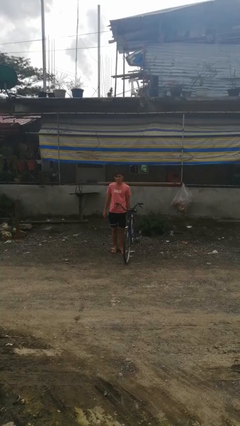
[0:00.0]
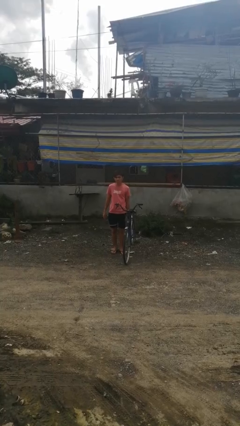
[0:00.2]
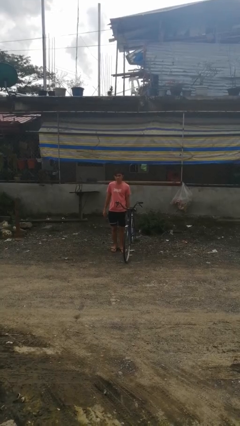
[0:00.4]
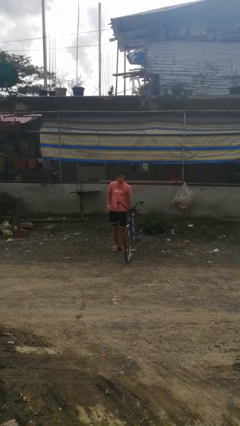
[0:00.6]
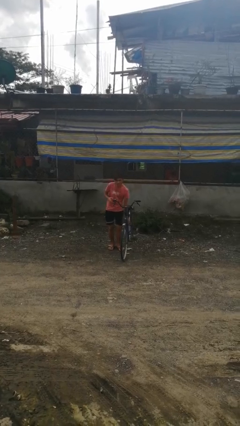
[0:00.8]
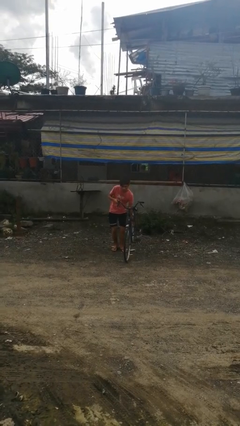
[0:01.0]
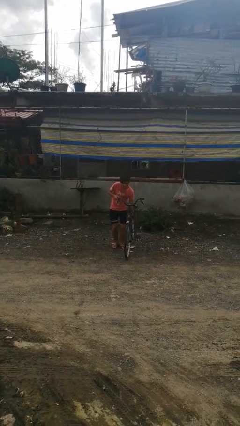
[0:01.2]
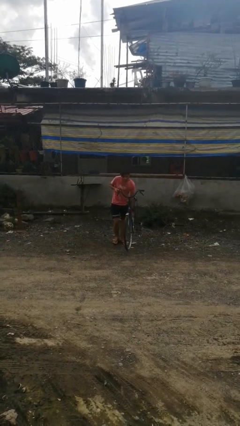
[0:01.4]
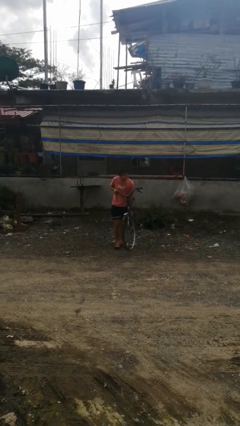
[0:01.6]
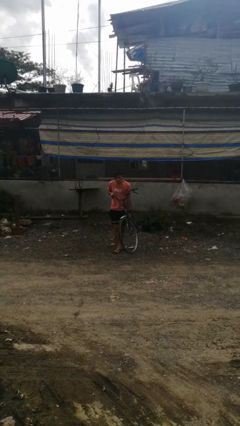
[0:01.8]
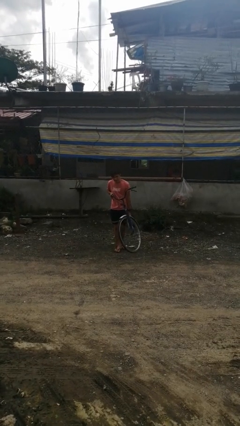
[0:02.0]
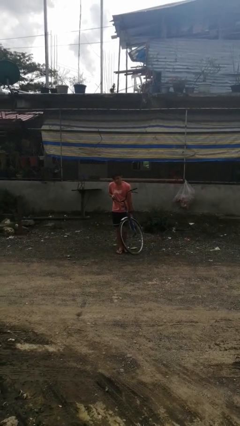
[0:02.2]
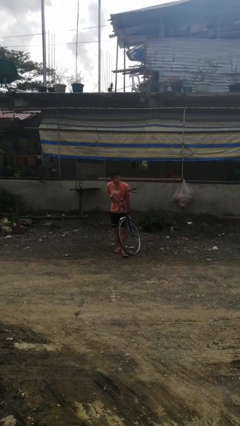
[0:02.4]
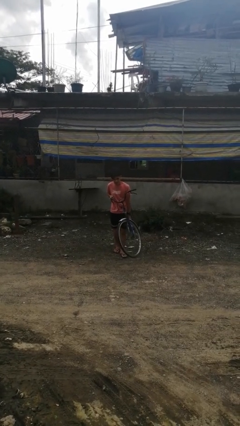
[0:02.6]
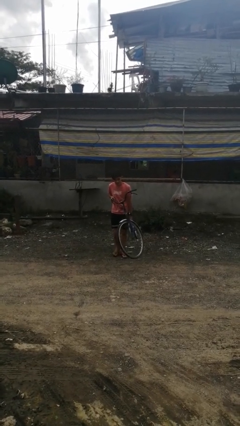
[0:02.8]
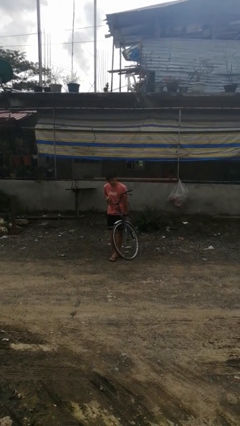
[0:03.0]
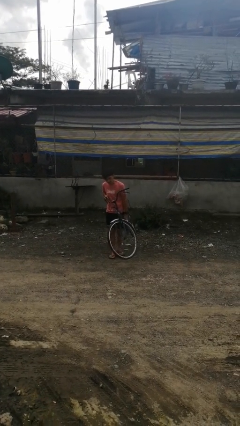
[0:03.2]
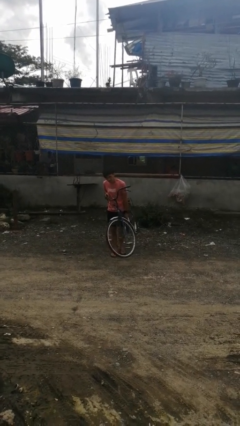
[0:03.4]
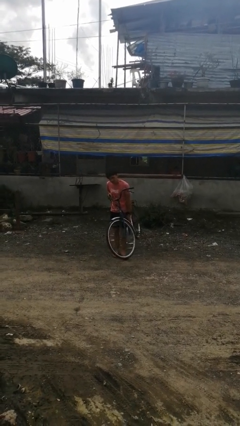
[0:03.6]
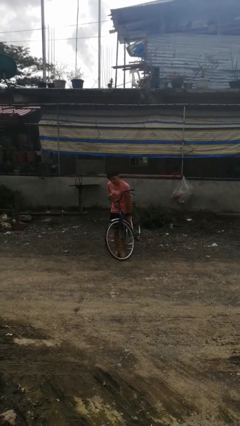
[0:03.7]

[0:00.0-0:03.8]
person carries bicycle

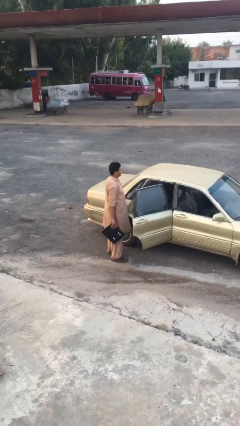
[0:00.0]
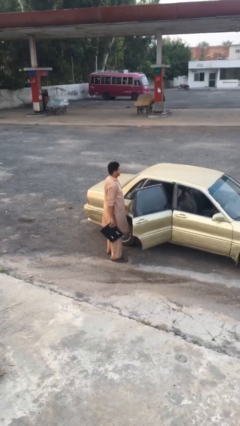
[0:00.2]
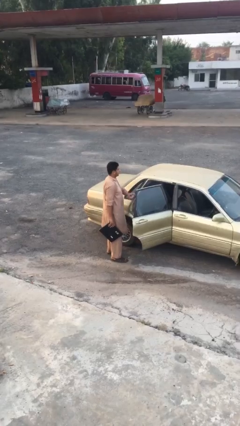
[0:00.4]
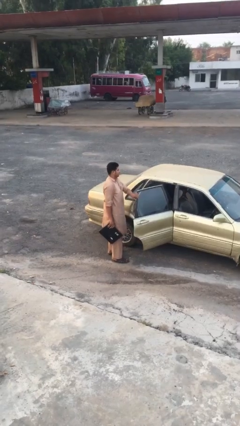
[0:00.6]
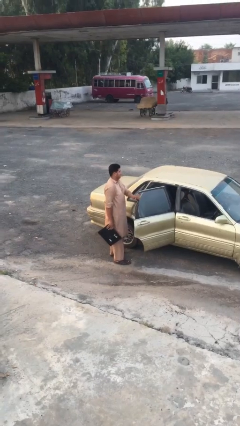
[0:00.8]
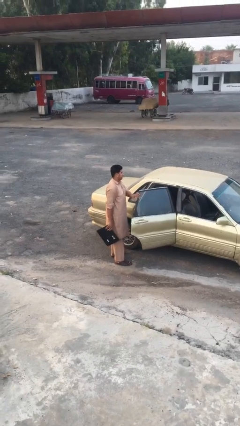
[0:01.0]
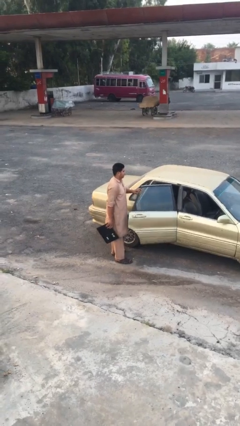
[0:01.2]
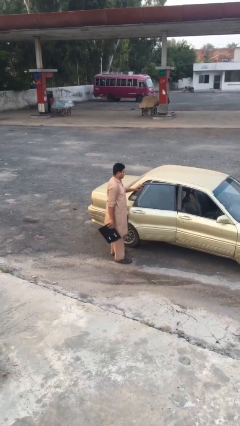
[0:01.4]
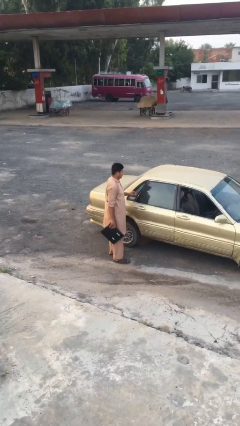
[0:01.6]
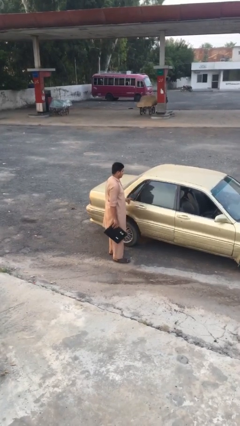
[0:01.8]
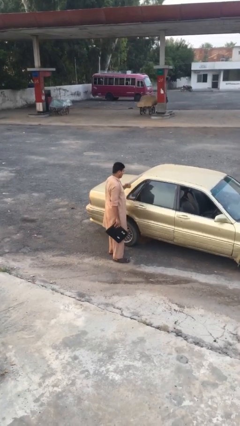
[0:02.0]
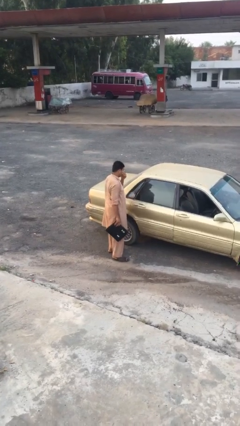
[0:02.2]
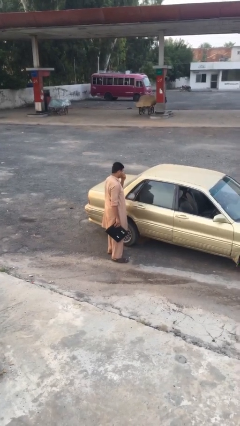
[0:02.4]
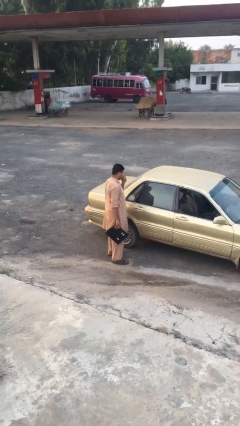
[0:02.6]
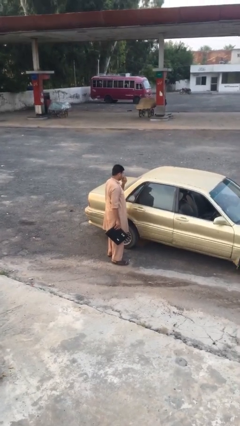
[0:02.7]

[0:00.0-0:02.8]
person closes car door

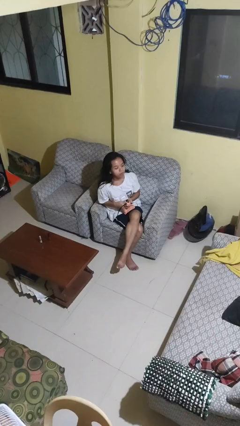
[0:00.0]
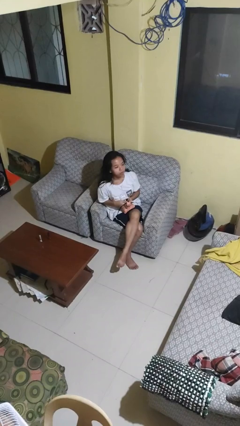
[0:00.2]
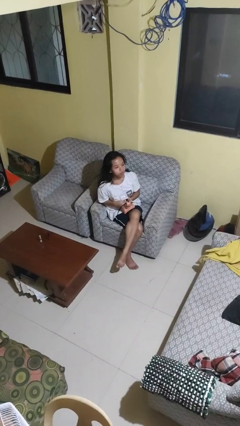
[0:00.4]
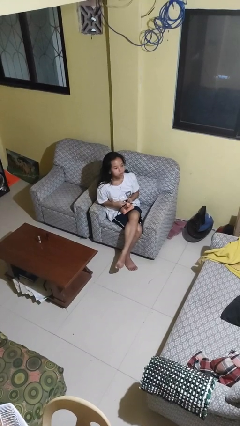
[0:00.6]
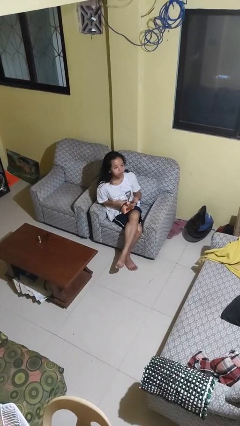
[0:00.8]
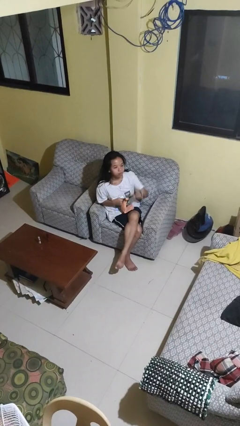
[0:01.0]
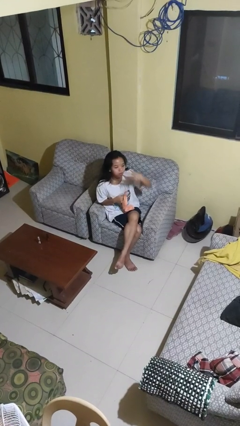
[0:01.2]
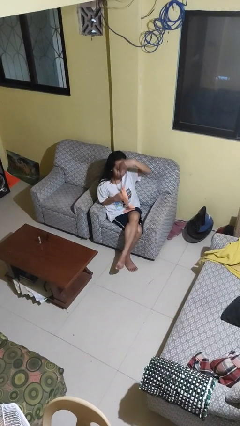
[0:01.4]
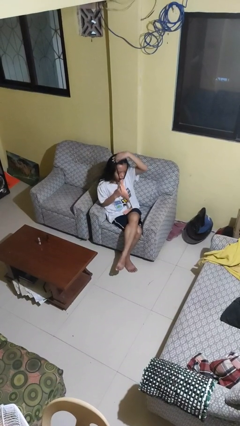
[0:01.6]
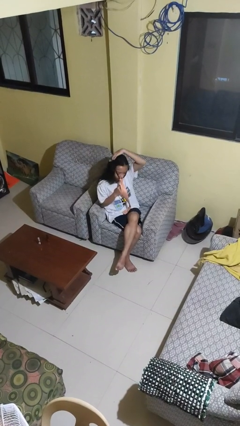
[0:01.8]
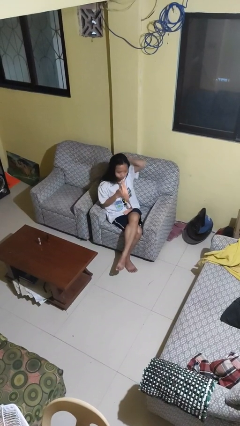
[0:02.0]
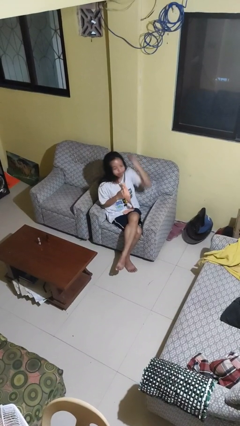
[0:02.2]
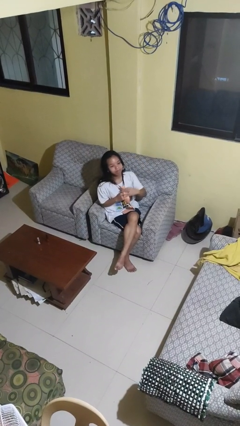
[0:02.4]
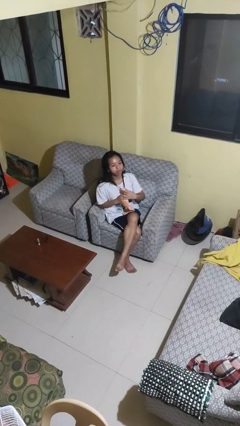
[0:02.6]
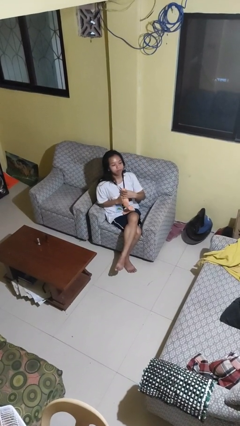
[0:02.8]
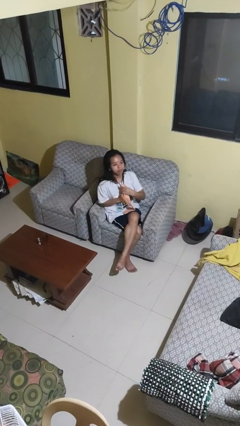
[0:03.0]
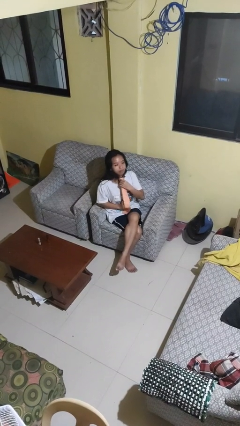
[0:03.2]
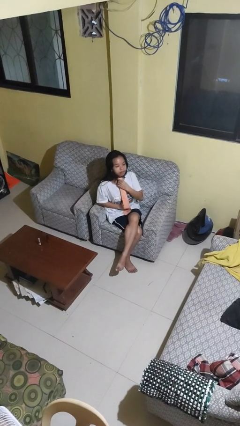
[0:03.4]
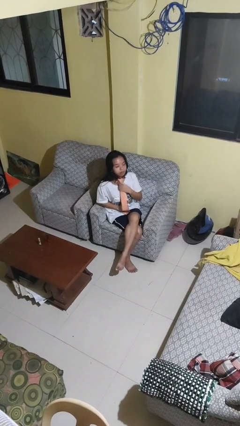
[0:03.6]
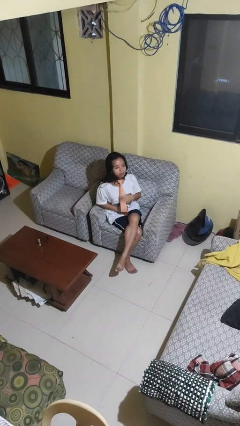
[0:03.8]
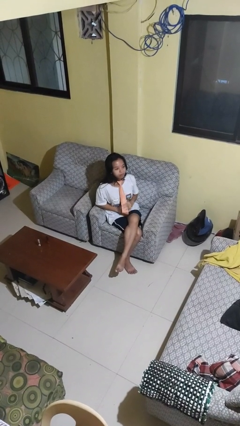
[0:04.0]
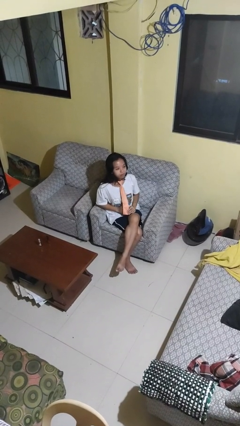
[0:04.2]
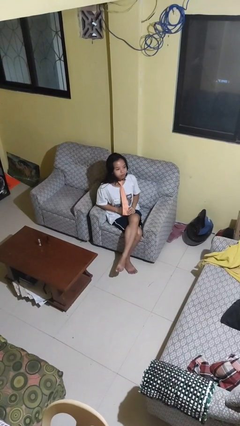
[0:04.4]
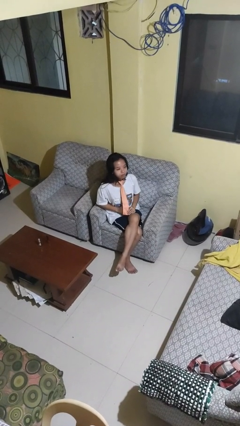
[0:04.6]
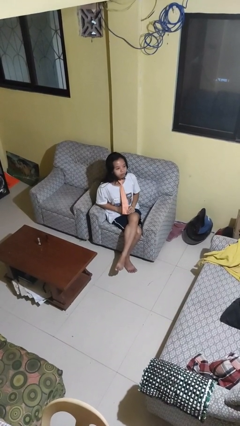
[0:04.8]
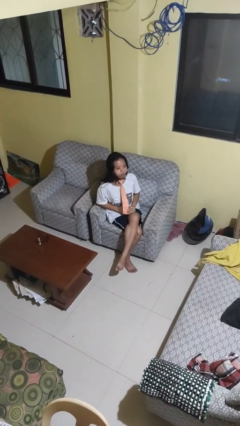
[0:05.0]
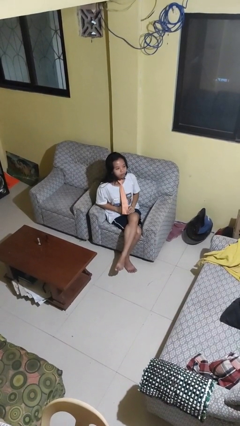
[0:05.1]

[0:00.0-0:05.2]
person puts on necktie

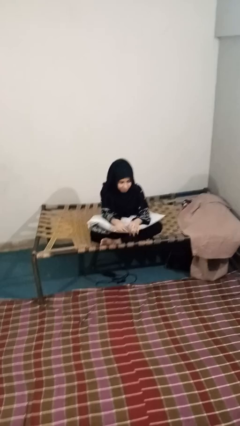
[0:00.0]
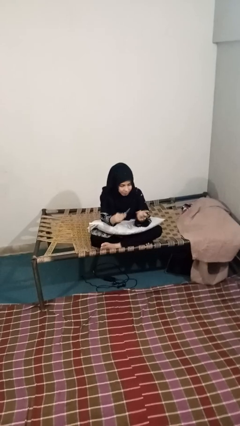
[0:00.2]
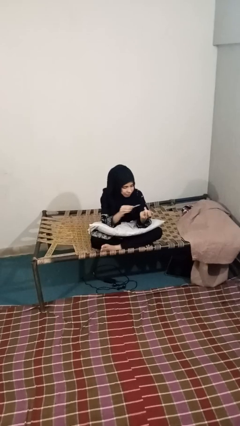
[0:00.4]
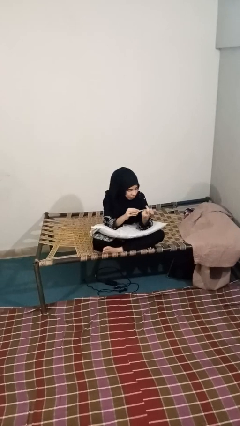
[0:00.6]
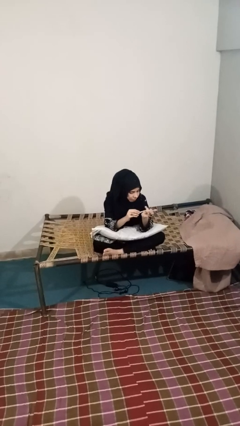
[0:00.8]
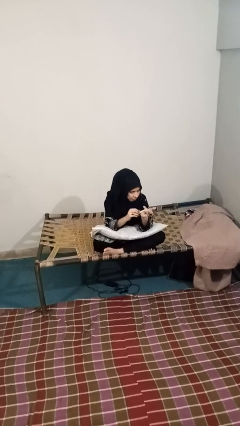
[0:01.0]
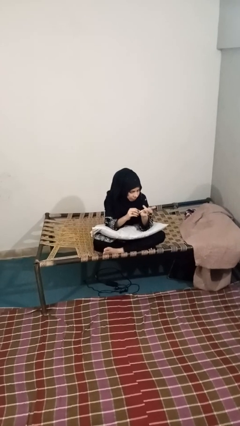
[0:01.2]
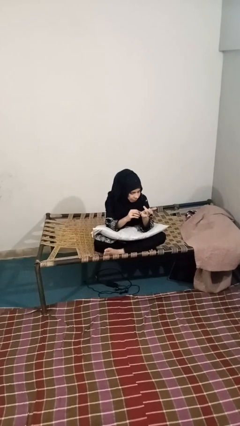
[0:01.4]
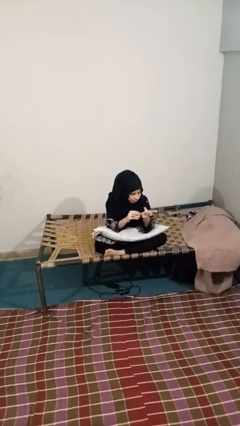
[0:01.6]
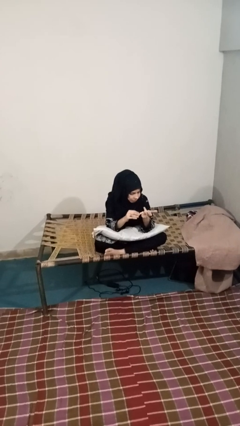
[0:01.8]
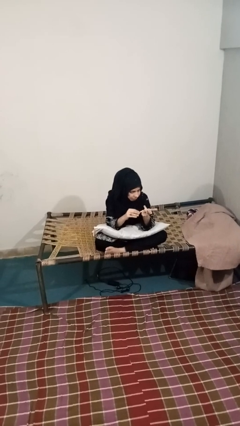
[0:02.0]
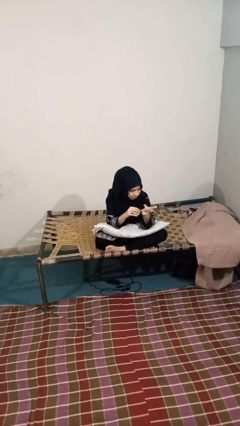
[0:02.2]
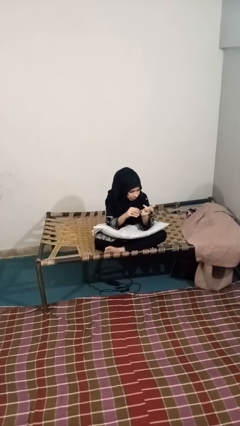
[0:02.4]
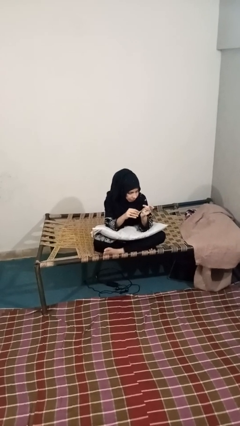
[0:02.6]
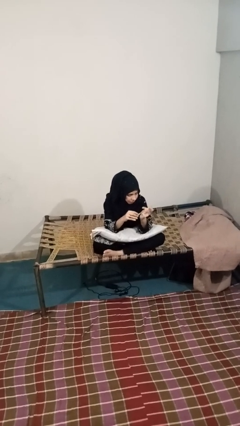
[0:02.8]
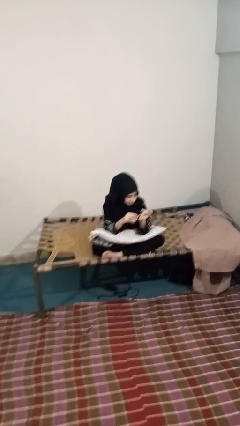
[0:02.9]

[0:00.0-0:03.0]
person files fingernails

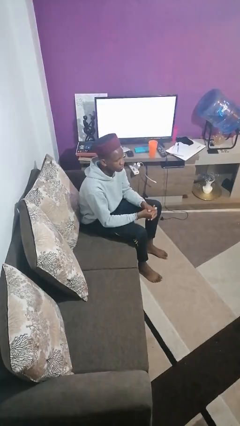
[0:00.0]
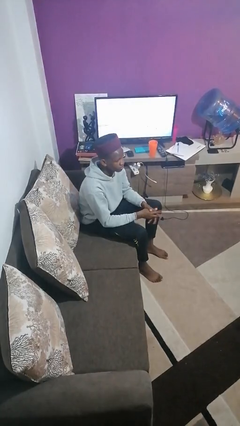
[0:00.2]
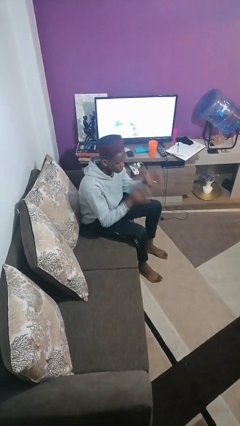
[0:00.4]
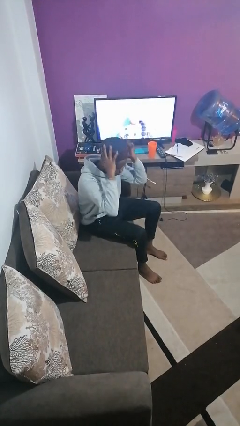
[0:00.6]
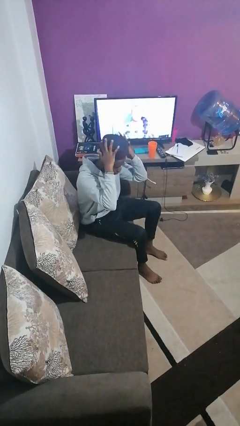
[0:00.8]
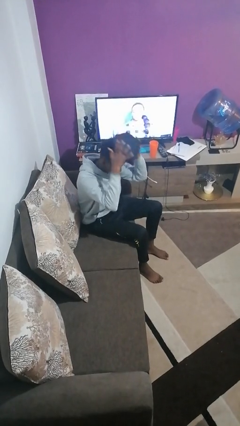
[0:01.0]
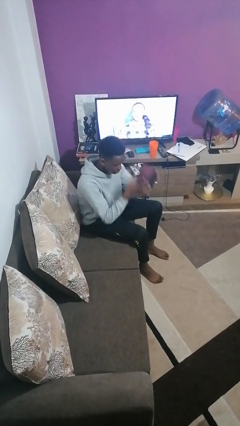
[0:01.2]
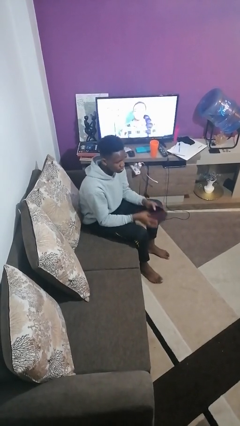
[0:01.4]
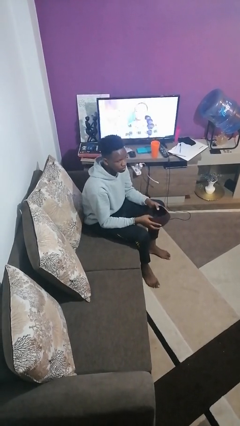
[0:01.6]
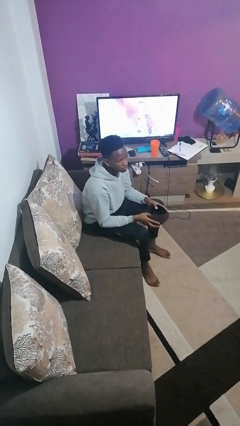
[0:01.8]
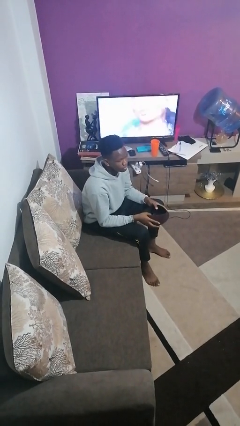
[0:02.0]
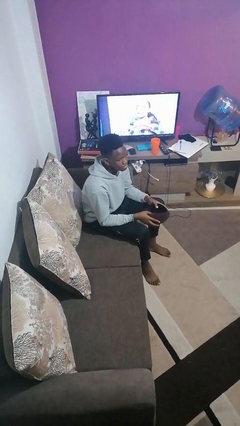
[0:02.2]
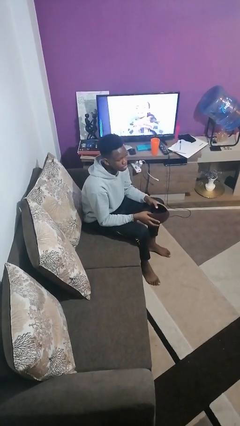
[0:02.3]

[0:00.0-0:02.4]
person takes off hat

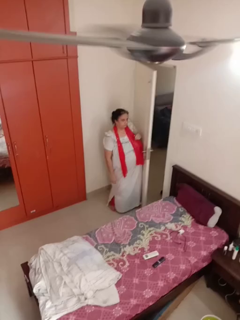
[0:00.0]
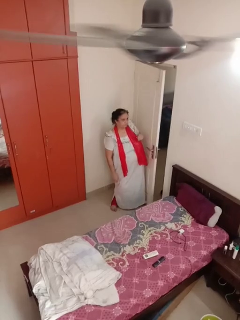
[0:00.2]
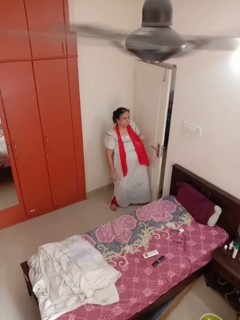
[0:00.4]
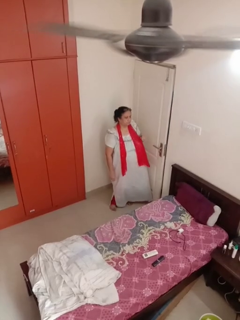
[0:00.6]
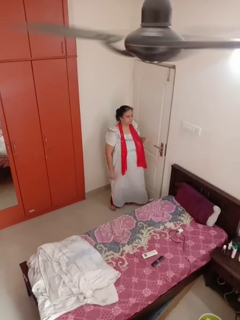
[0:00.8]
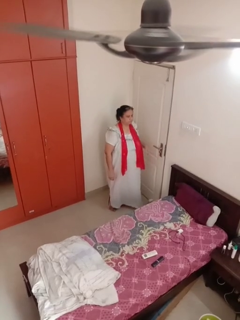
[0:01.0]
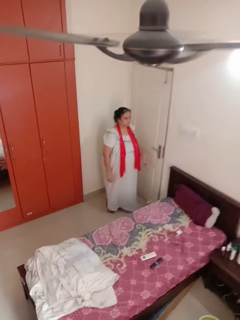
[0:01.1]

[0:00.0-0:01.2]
person closes door with hip
